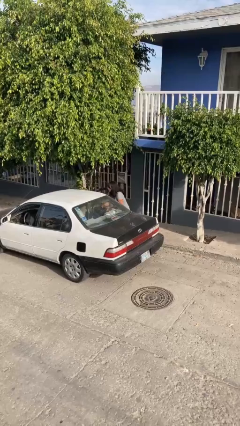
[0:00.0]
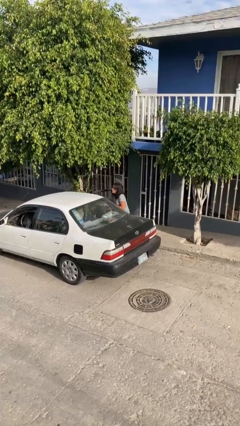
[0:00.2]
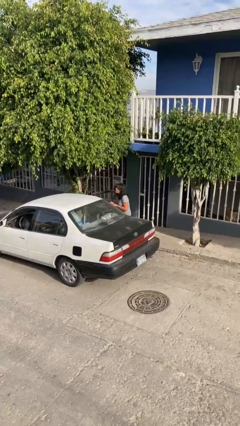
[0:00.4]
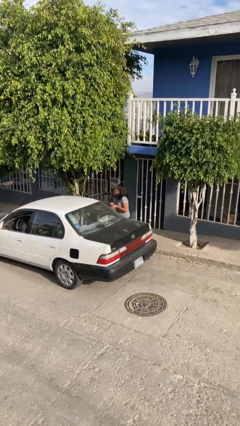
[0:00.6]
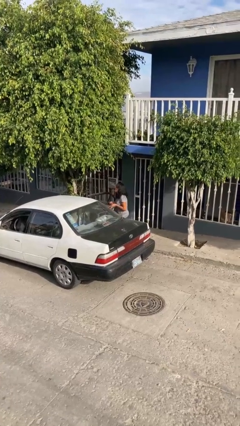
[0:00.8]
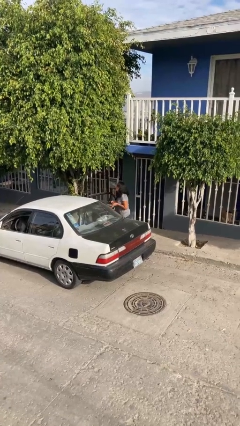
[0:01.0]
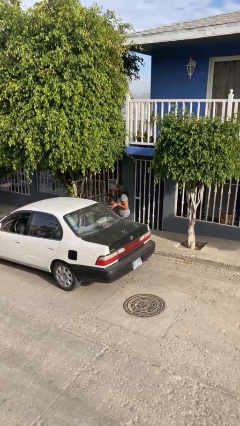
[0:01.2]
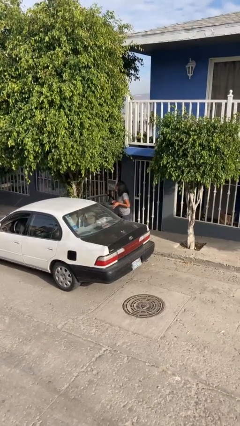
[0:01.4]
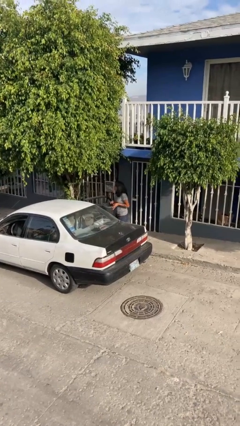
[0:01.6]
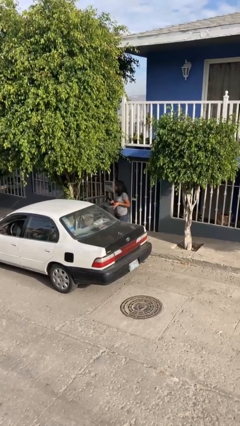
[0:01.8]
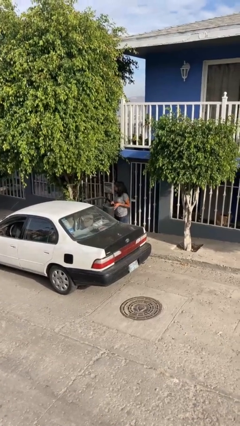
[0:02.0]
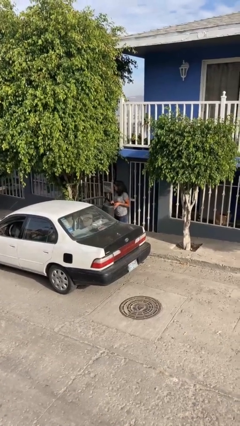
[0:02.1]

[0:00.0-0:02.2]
person unloads car

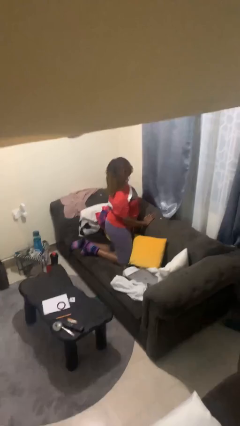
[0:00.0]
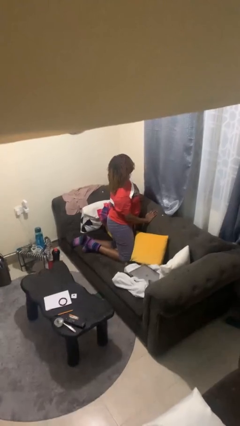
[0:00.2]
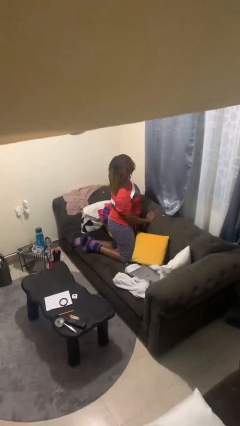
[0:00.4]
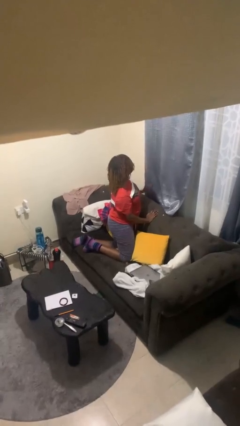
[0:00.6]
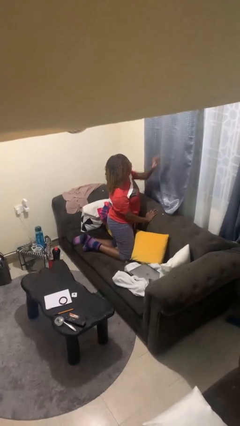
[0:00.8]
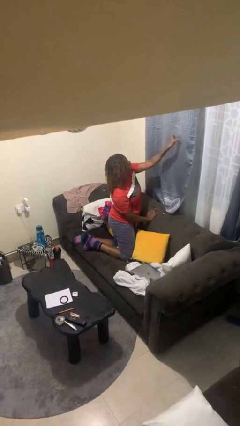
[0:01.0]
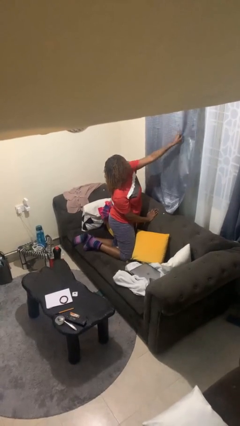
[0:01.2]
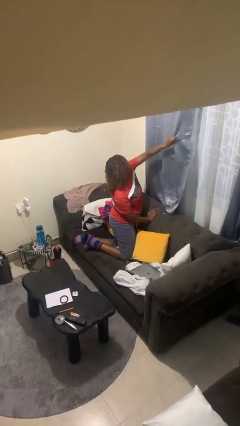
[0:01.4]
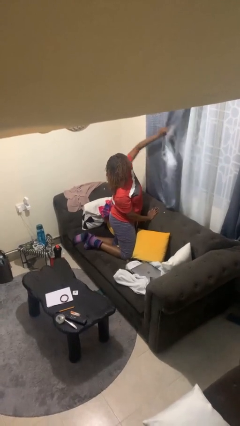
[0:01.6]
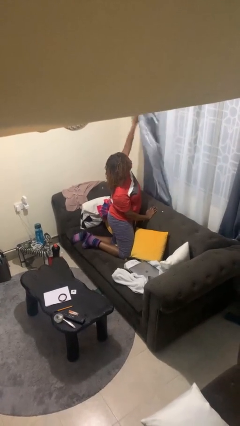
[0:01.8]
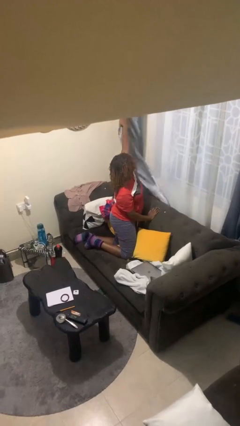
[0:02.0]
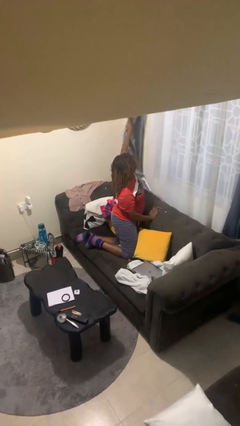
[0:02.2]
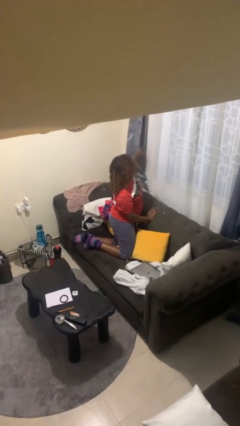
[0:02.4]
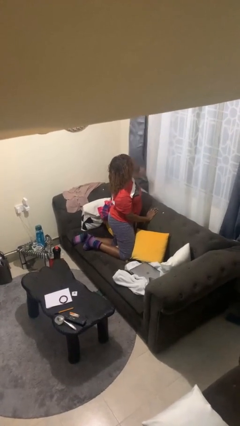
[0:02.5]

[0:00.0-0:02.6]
person opens curtains

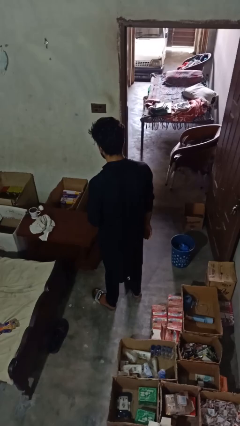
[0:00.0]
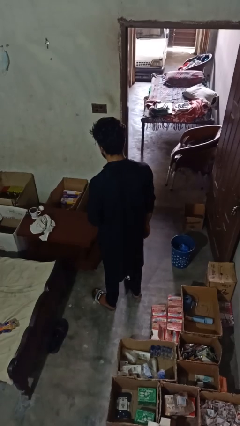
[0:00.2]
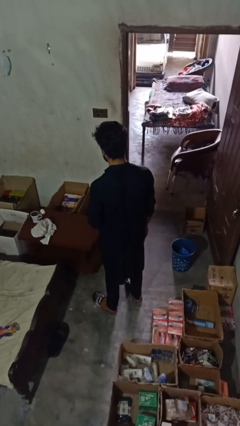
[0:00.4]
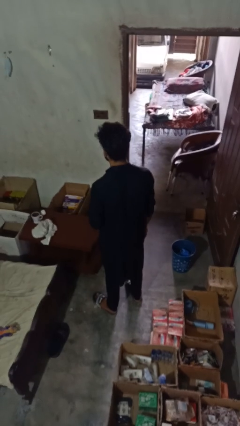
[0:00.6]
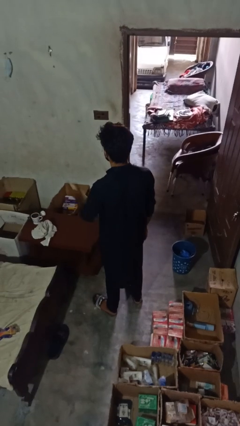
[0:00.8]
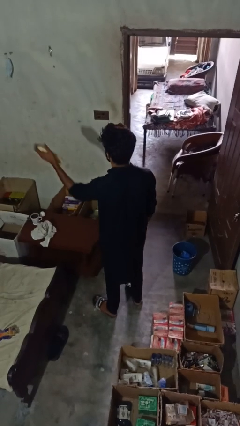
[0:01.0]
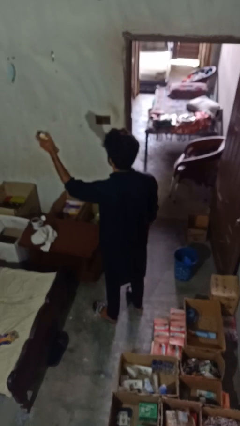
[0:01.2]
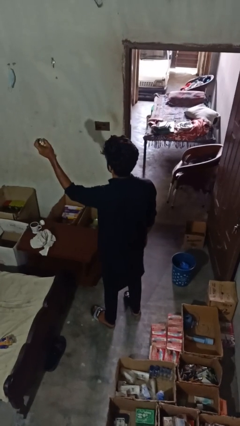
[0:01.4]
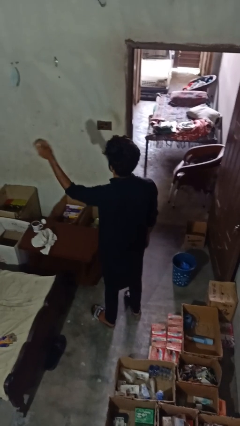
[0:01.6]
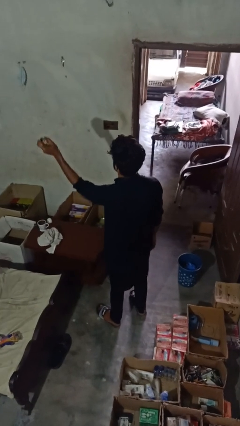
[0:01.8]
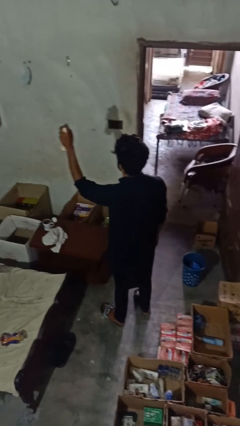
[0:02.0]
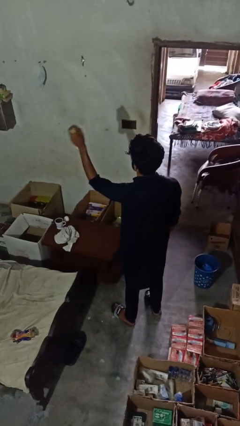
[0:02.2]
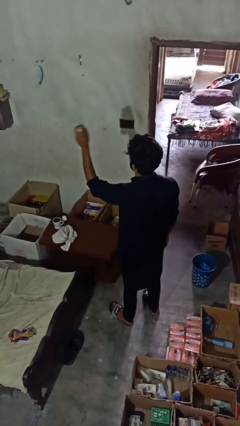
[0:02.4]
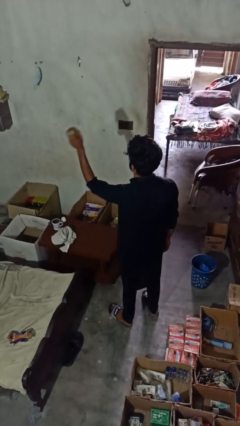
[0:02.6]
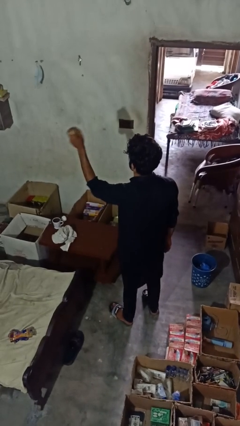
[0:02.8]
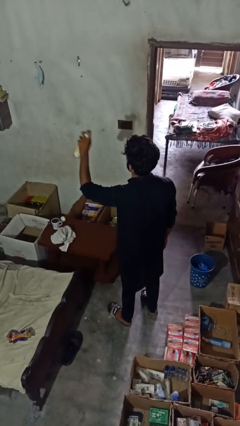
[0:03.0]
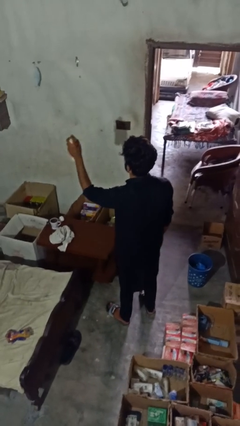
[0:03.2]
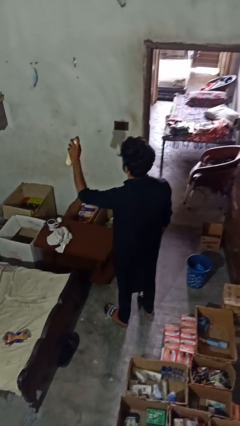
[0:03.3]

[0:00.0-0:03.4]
person sprays from bottle

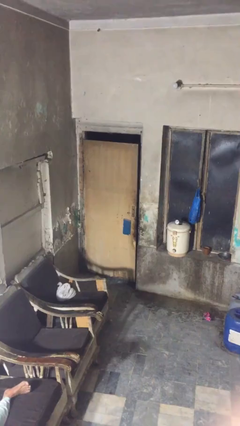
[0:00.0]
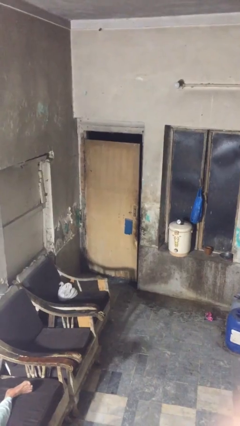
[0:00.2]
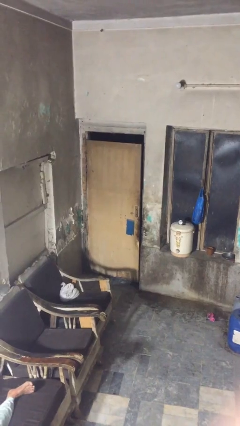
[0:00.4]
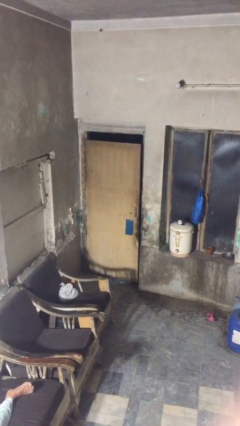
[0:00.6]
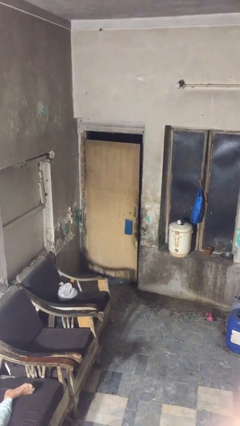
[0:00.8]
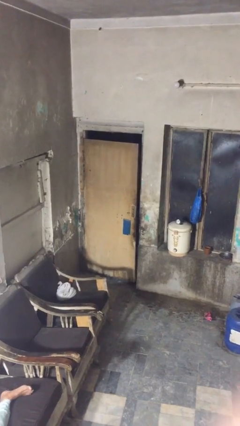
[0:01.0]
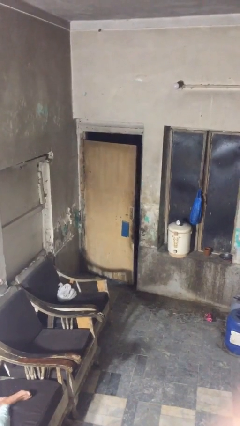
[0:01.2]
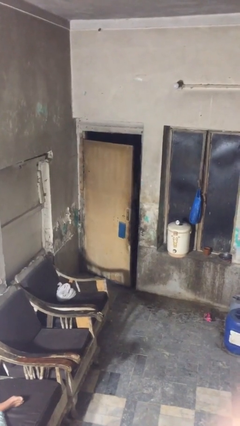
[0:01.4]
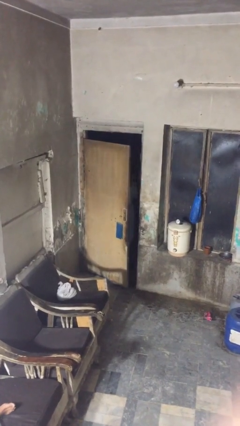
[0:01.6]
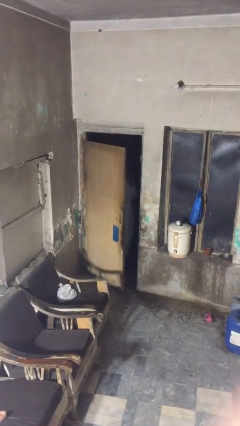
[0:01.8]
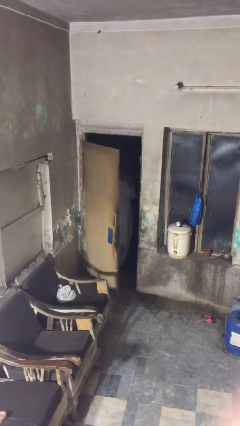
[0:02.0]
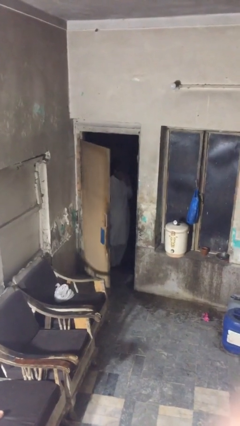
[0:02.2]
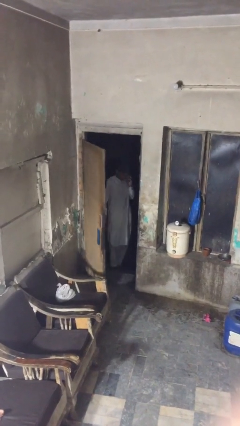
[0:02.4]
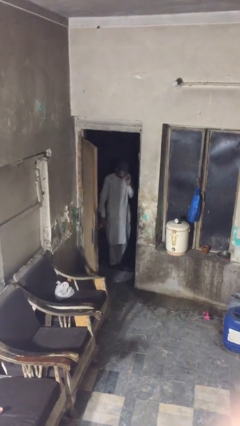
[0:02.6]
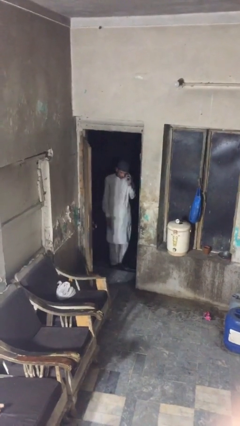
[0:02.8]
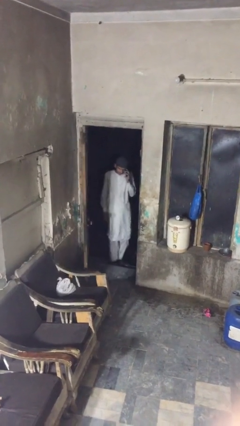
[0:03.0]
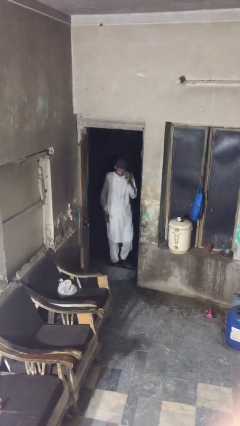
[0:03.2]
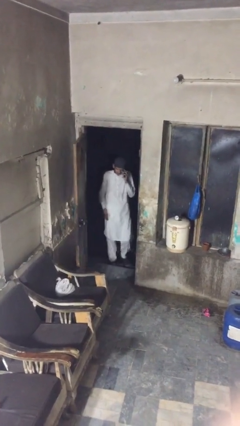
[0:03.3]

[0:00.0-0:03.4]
person opens facility door

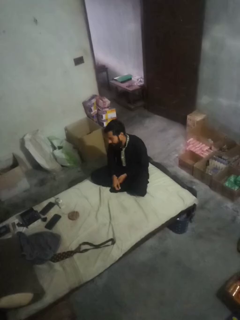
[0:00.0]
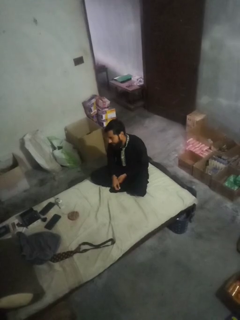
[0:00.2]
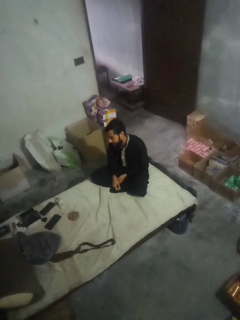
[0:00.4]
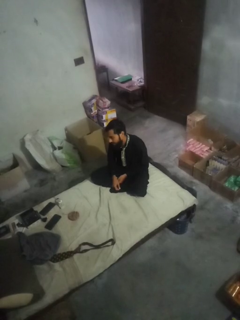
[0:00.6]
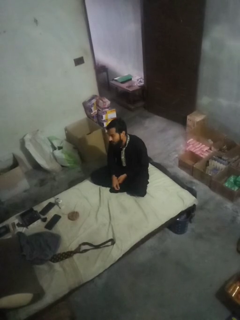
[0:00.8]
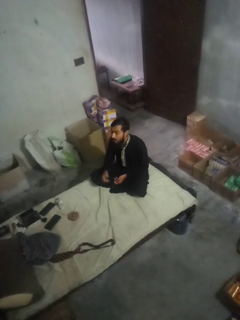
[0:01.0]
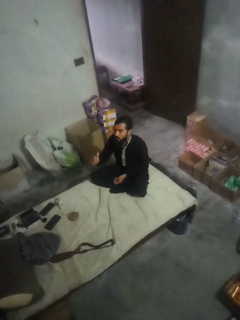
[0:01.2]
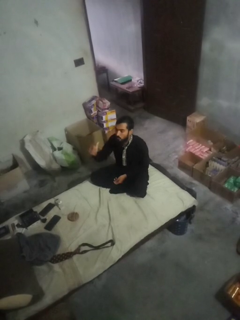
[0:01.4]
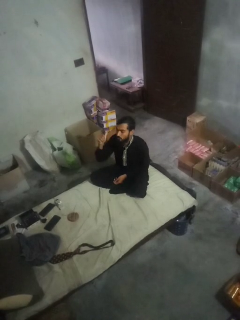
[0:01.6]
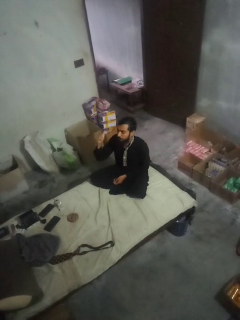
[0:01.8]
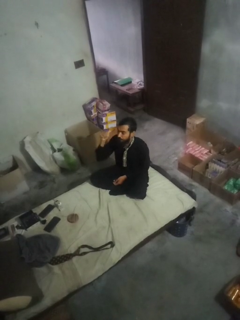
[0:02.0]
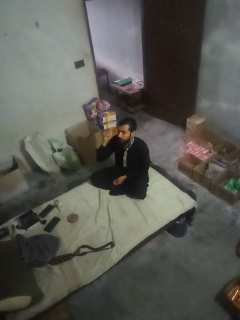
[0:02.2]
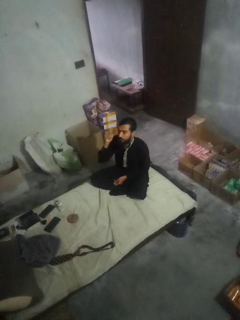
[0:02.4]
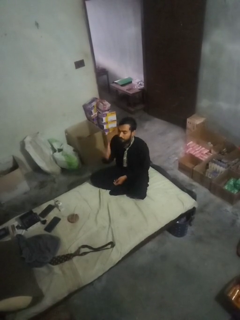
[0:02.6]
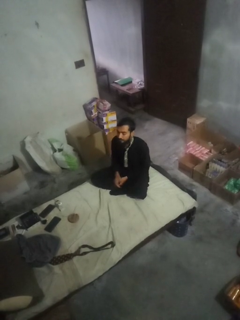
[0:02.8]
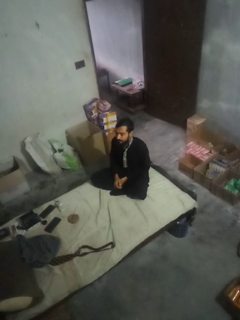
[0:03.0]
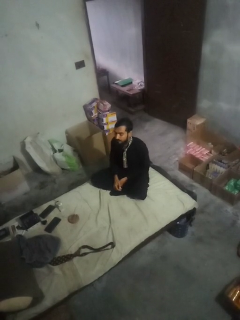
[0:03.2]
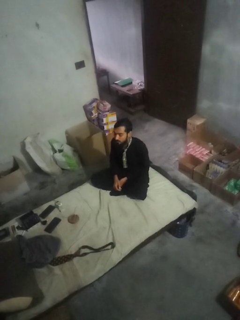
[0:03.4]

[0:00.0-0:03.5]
person gestures behind me

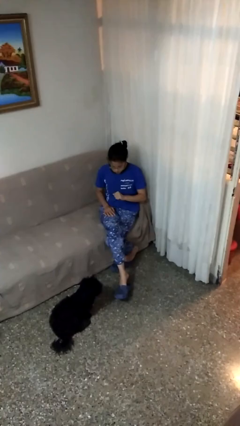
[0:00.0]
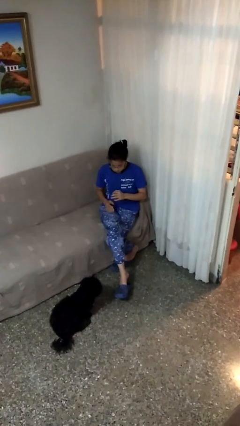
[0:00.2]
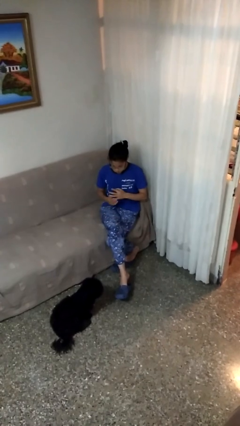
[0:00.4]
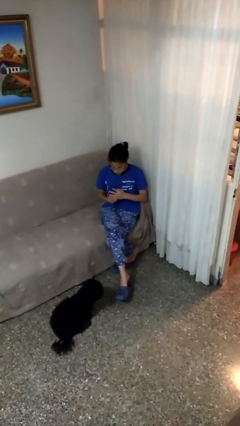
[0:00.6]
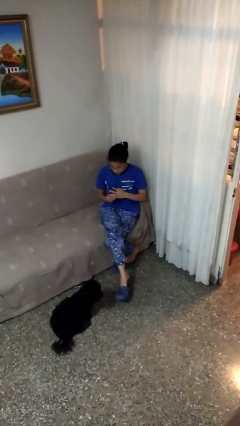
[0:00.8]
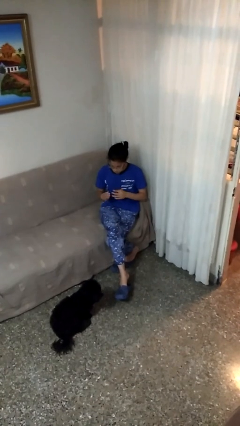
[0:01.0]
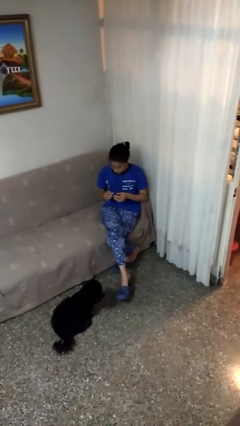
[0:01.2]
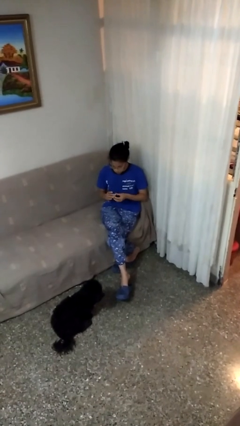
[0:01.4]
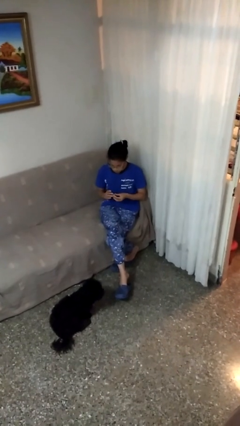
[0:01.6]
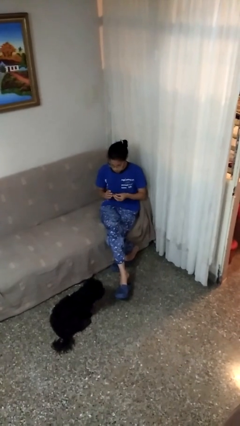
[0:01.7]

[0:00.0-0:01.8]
person takes off ring

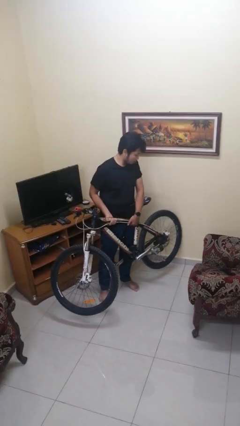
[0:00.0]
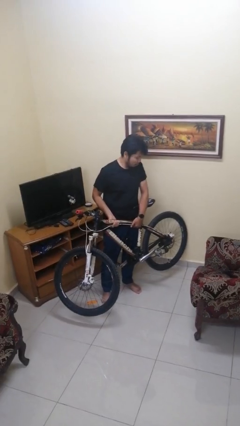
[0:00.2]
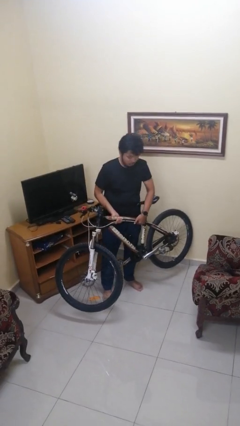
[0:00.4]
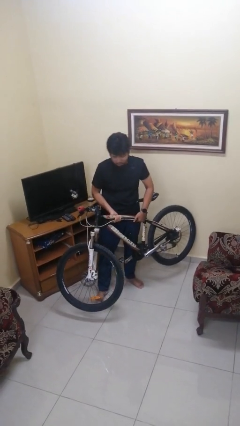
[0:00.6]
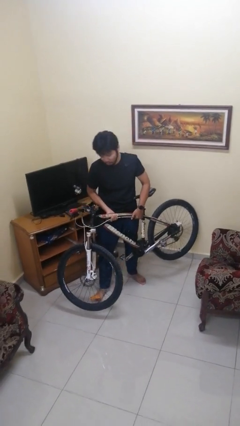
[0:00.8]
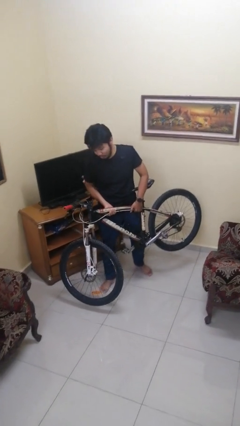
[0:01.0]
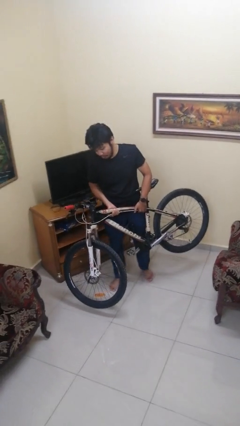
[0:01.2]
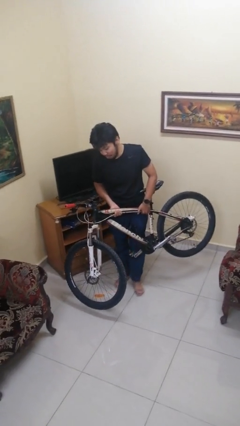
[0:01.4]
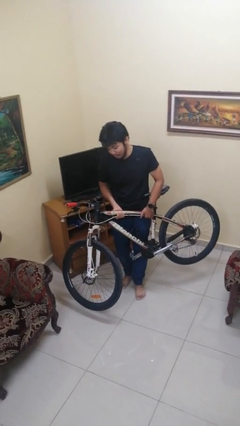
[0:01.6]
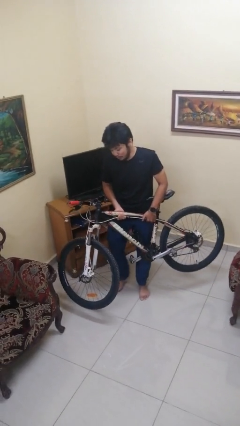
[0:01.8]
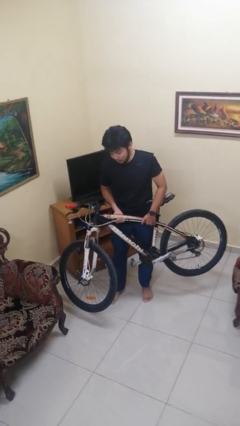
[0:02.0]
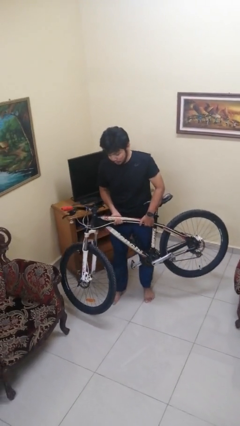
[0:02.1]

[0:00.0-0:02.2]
person carries bicycle
